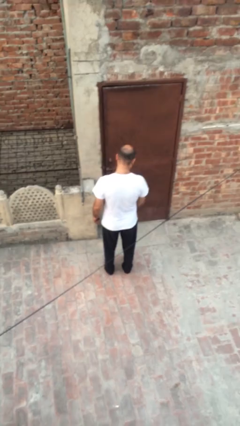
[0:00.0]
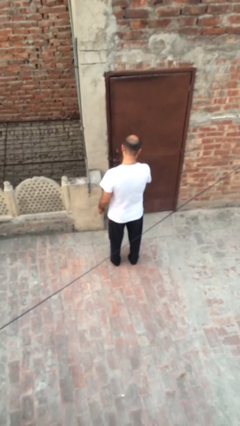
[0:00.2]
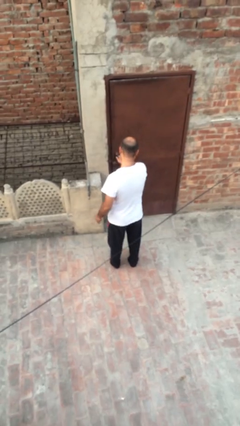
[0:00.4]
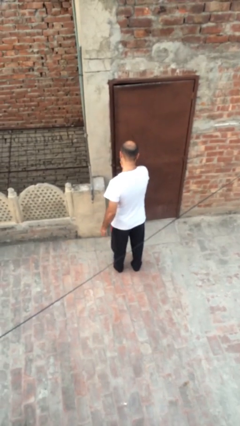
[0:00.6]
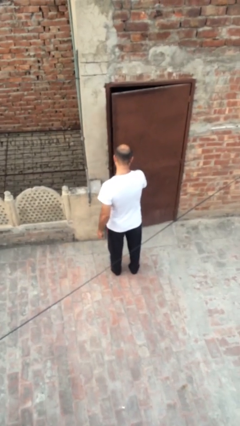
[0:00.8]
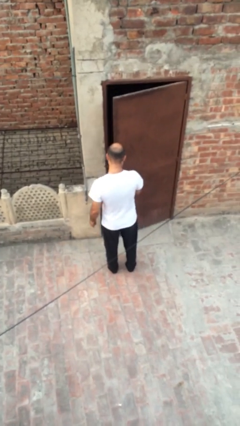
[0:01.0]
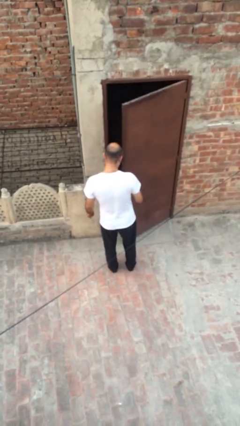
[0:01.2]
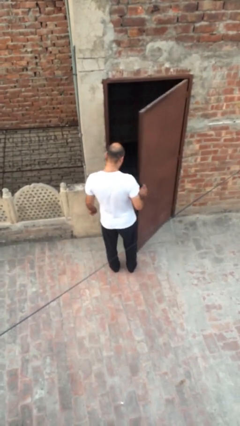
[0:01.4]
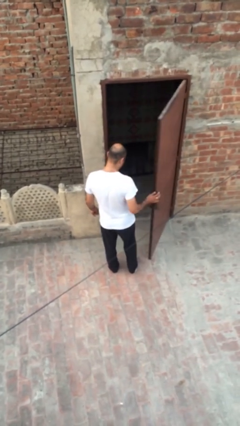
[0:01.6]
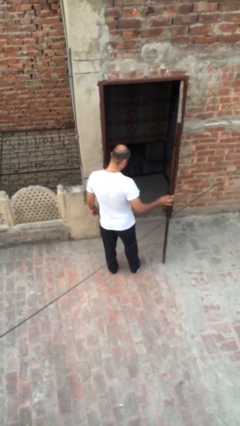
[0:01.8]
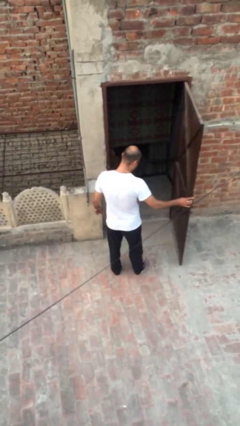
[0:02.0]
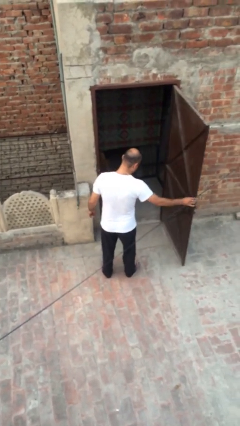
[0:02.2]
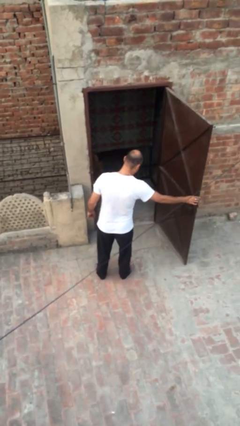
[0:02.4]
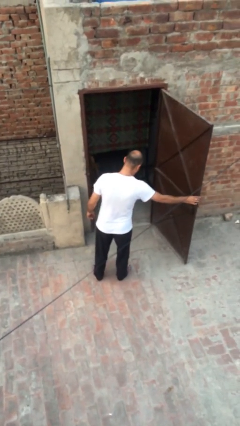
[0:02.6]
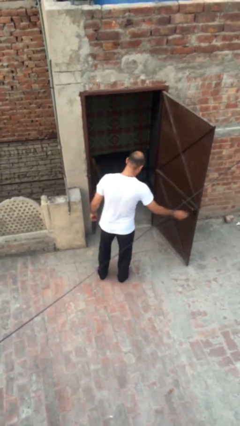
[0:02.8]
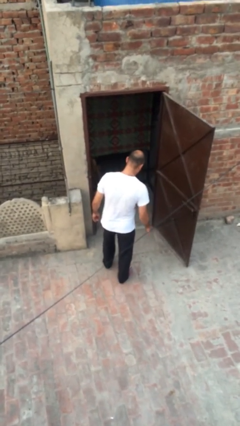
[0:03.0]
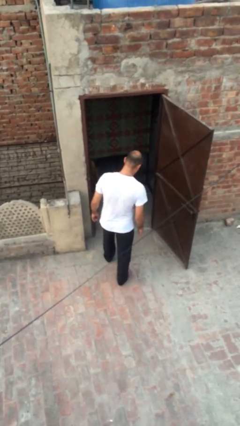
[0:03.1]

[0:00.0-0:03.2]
person opens facility door

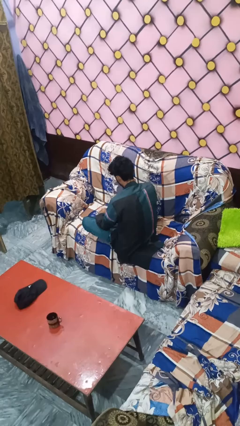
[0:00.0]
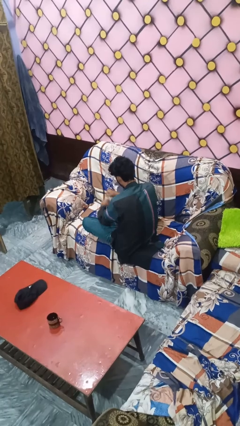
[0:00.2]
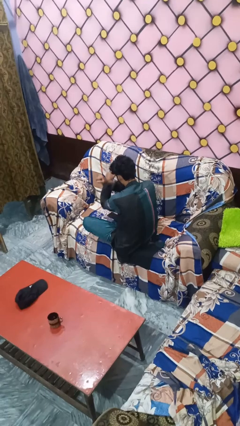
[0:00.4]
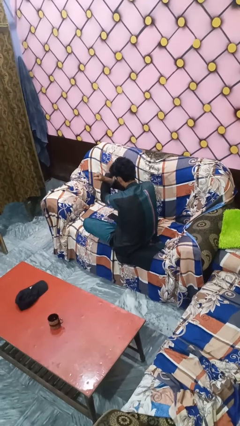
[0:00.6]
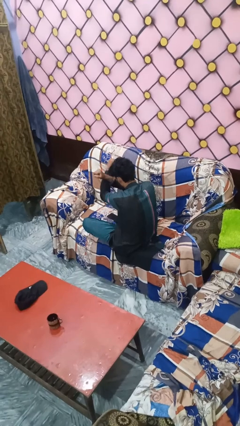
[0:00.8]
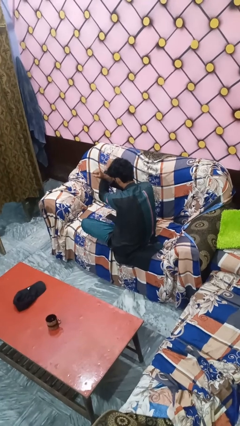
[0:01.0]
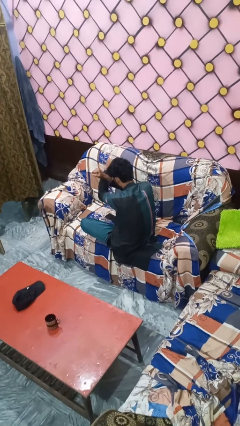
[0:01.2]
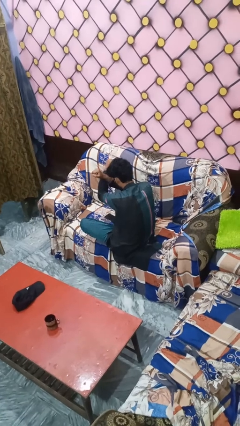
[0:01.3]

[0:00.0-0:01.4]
person gestures arms x

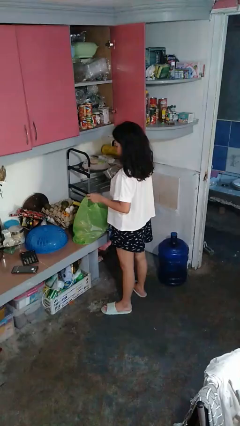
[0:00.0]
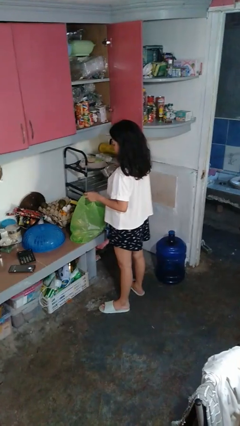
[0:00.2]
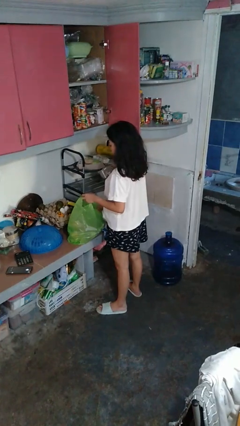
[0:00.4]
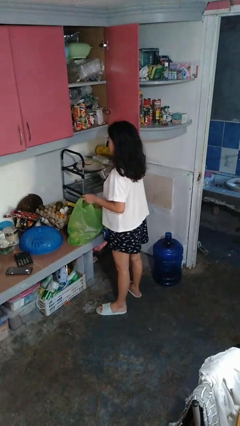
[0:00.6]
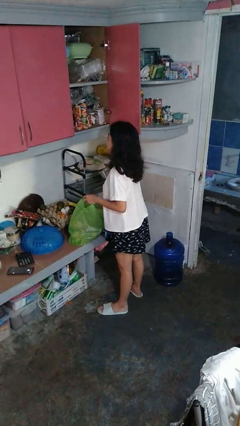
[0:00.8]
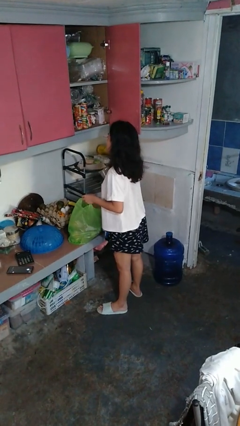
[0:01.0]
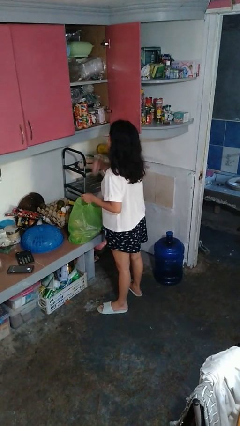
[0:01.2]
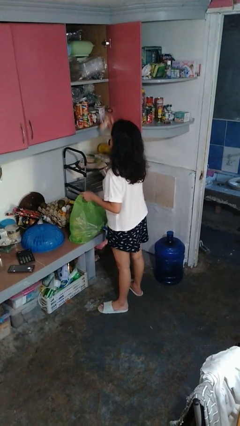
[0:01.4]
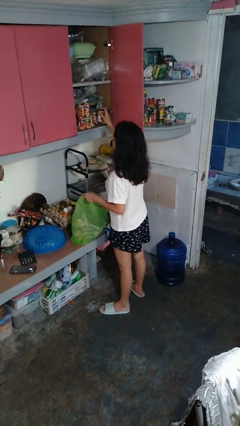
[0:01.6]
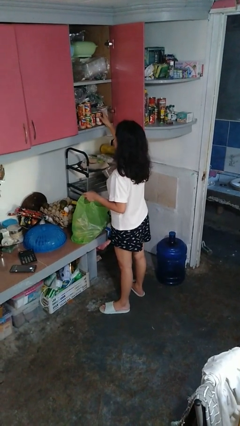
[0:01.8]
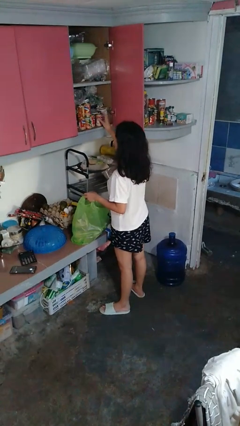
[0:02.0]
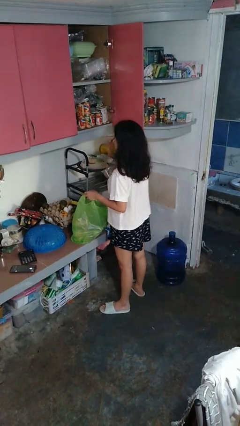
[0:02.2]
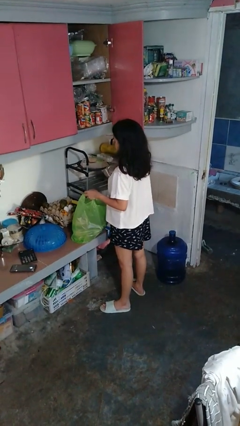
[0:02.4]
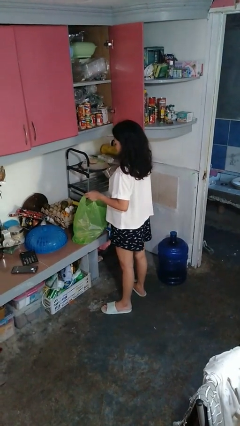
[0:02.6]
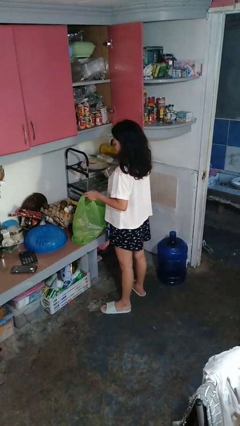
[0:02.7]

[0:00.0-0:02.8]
person loads groceries into cabinet

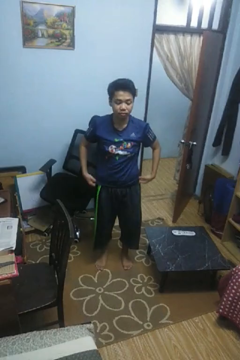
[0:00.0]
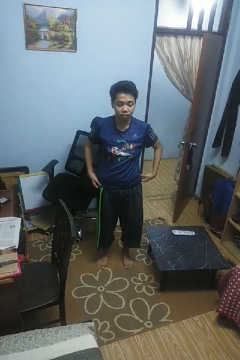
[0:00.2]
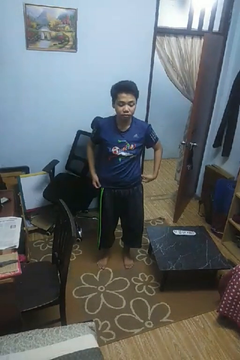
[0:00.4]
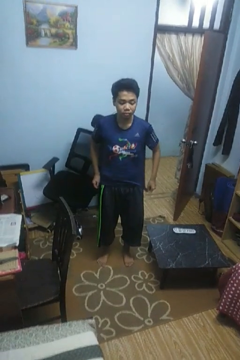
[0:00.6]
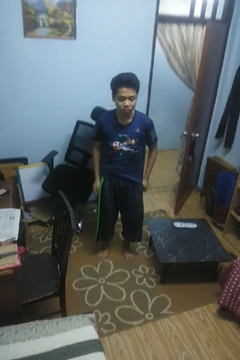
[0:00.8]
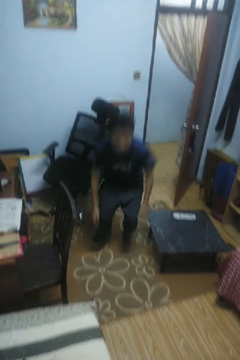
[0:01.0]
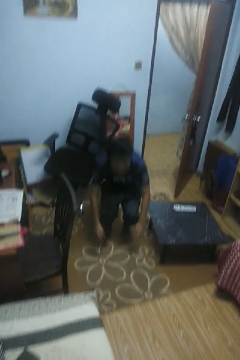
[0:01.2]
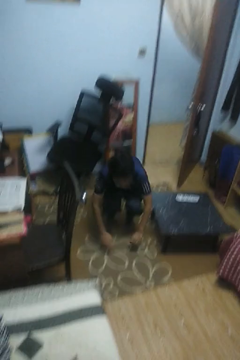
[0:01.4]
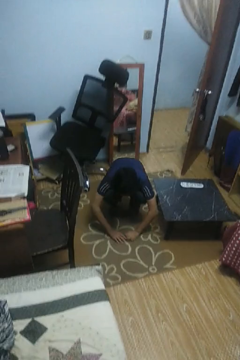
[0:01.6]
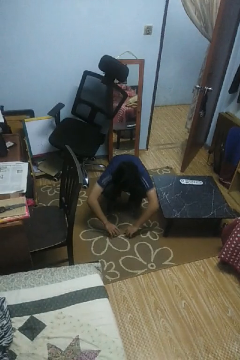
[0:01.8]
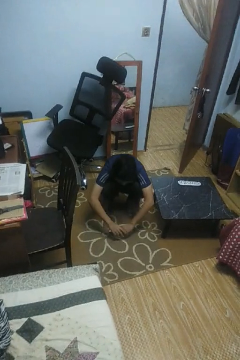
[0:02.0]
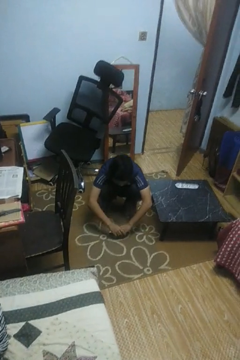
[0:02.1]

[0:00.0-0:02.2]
person squats

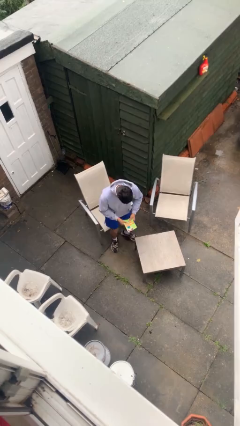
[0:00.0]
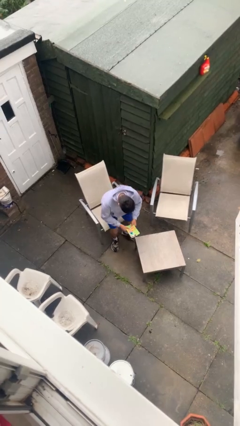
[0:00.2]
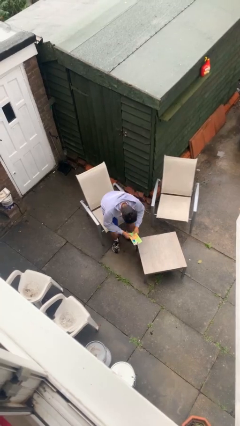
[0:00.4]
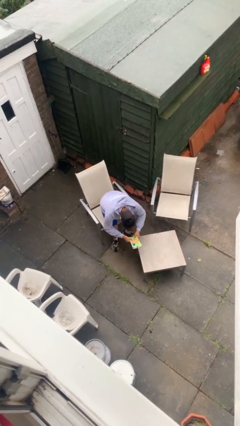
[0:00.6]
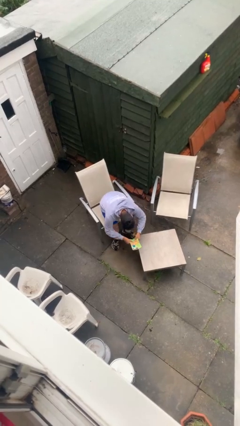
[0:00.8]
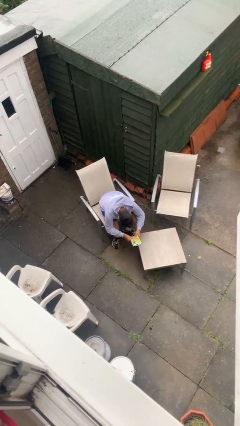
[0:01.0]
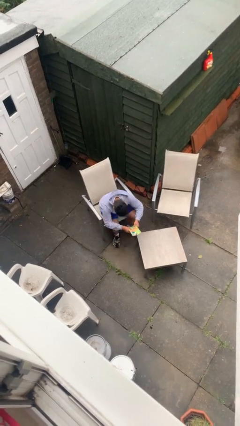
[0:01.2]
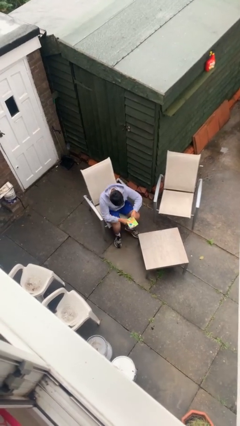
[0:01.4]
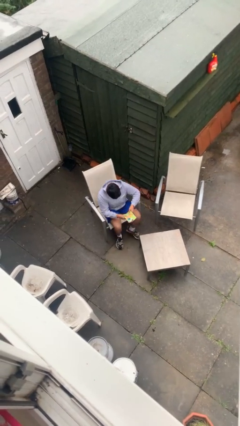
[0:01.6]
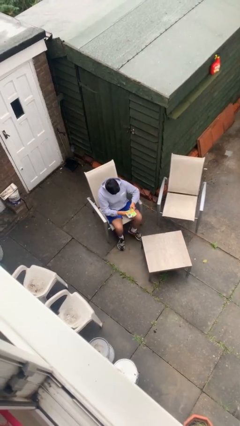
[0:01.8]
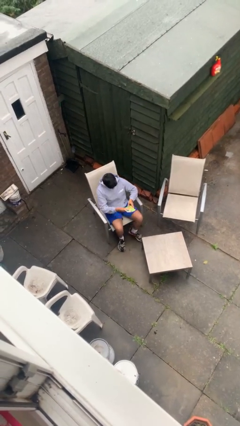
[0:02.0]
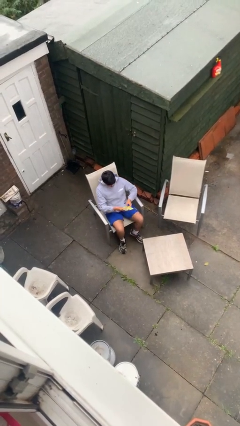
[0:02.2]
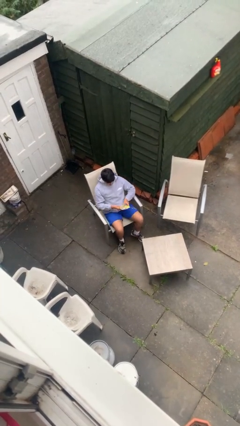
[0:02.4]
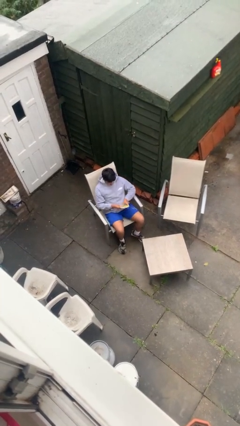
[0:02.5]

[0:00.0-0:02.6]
person sits down

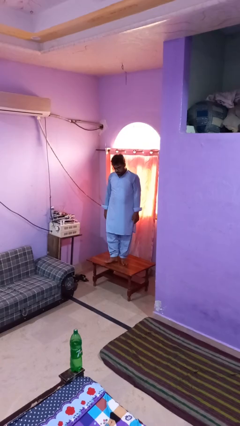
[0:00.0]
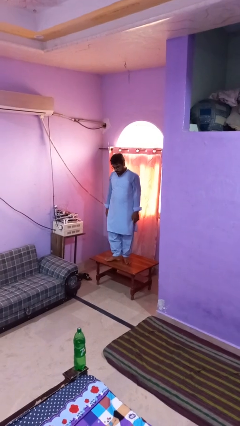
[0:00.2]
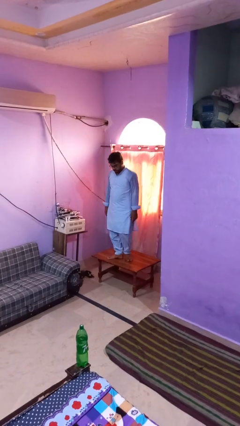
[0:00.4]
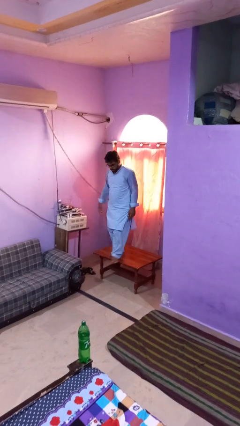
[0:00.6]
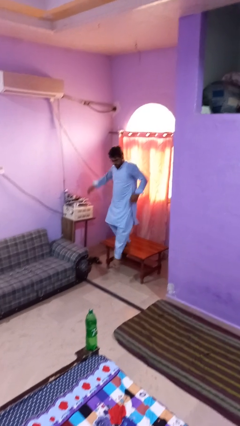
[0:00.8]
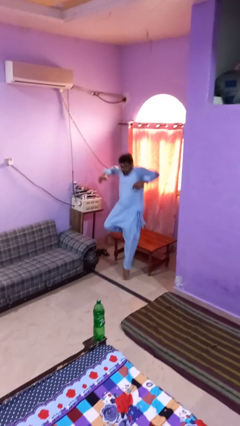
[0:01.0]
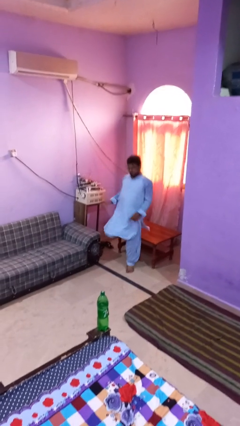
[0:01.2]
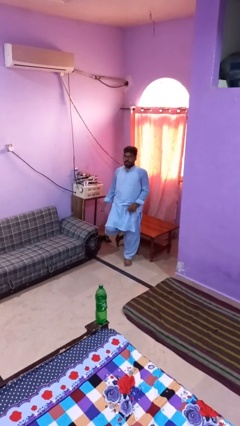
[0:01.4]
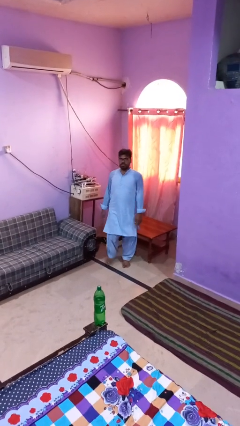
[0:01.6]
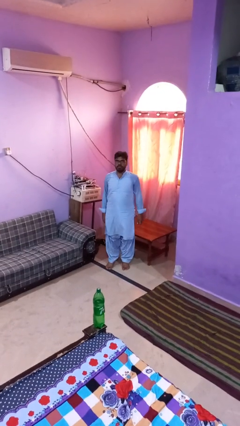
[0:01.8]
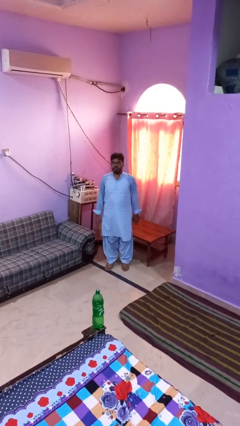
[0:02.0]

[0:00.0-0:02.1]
person climbs off table

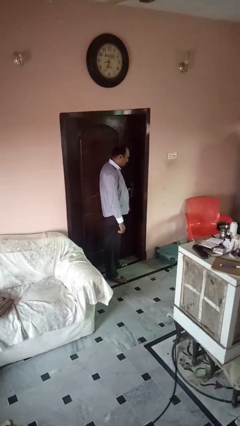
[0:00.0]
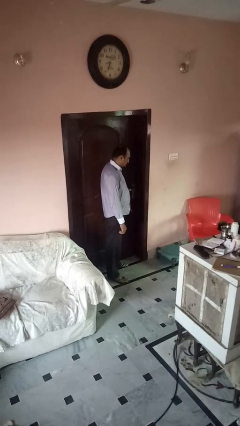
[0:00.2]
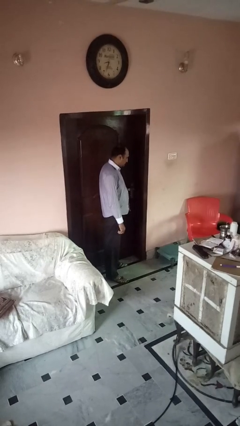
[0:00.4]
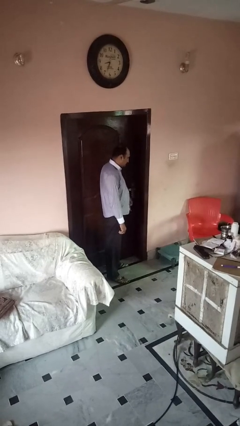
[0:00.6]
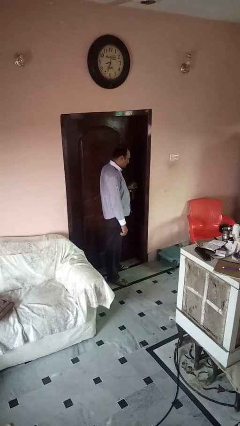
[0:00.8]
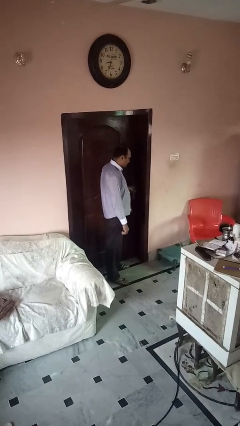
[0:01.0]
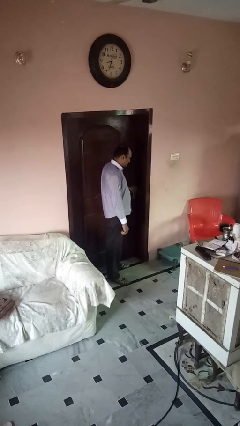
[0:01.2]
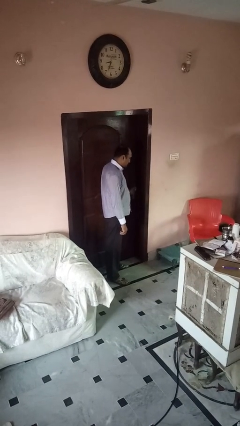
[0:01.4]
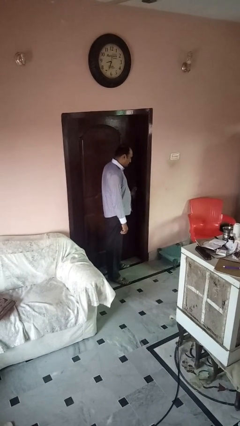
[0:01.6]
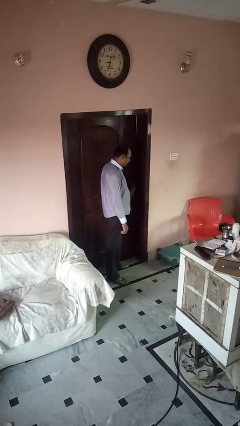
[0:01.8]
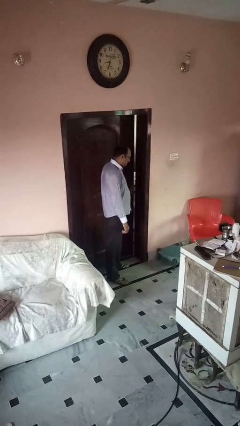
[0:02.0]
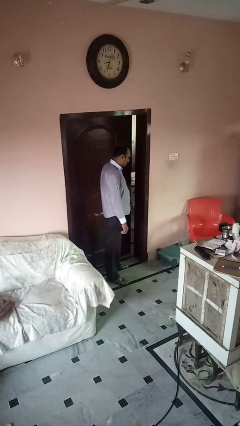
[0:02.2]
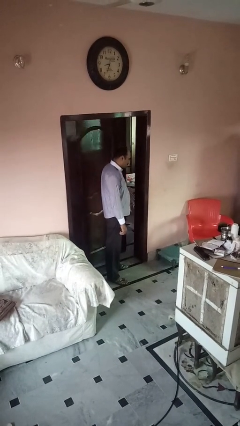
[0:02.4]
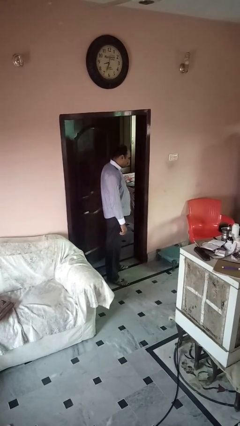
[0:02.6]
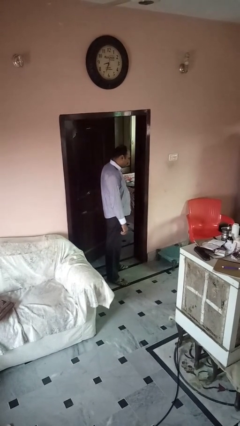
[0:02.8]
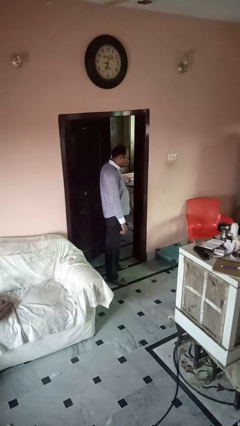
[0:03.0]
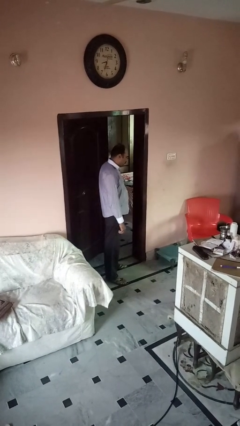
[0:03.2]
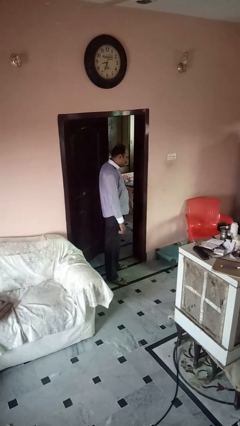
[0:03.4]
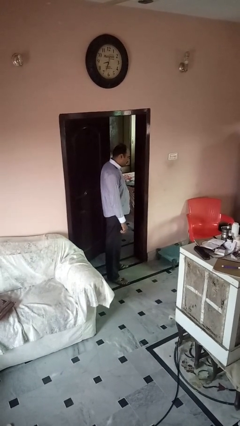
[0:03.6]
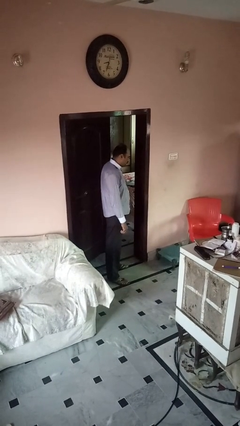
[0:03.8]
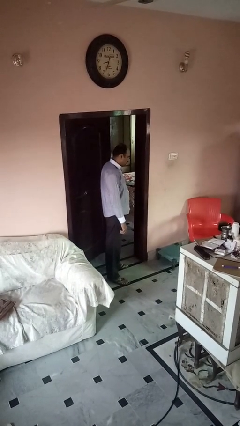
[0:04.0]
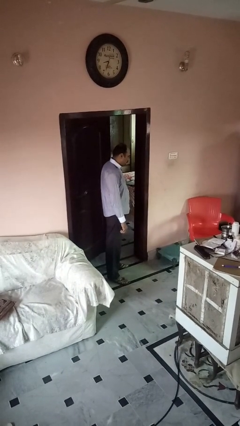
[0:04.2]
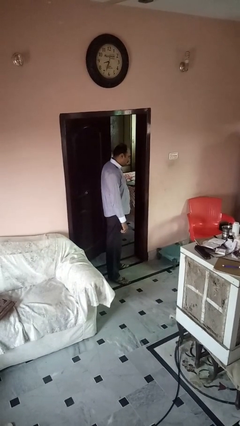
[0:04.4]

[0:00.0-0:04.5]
person opens gate
